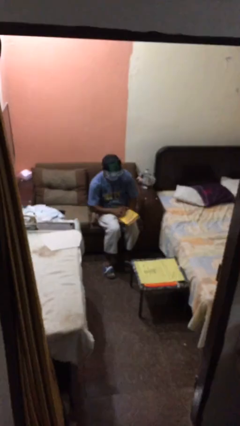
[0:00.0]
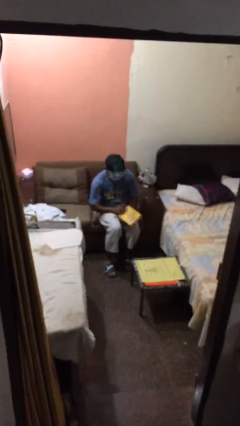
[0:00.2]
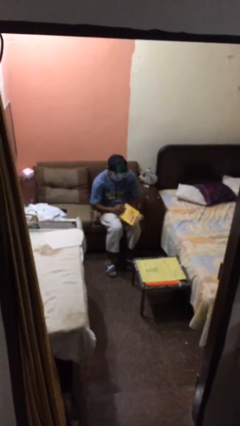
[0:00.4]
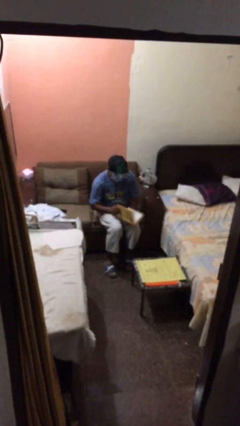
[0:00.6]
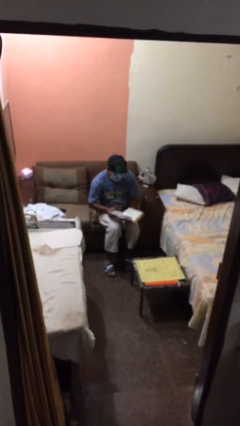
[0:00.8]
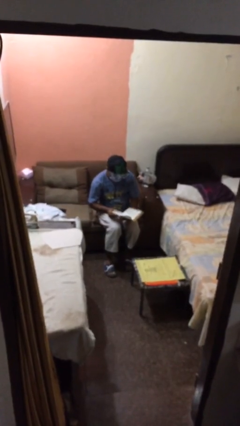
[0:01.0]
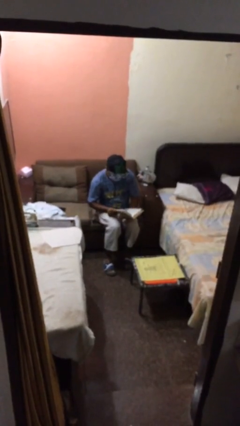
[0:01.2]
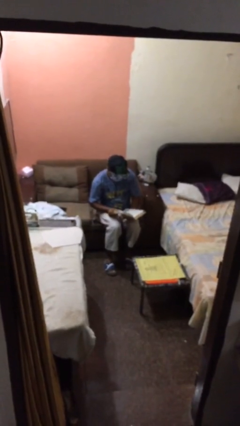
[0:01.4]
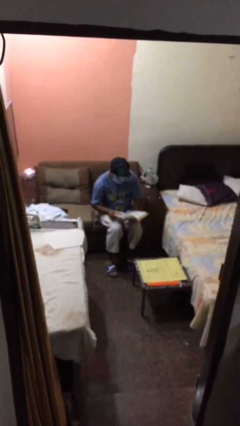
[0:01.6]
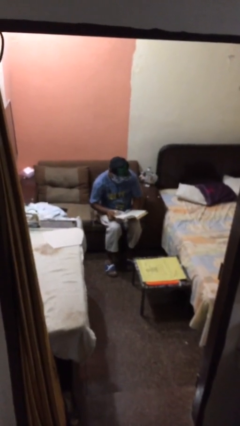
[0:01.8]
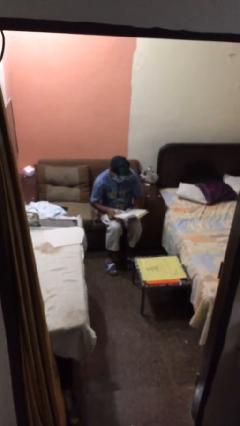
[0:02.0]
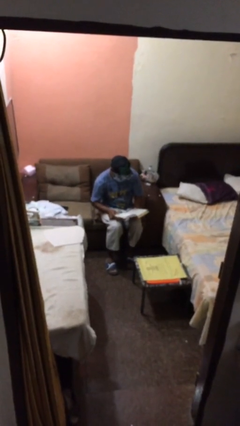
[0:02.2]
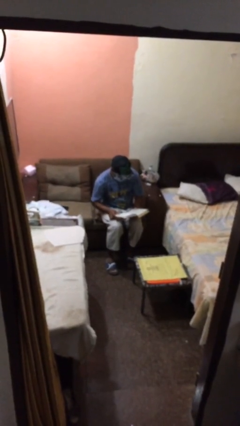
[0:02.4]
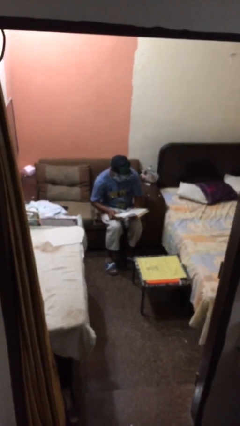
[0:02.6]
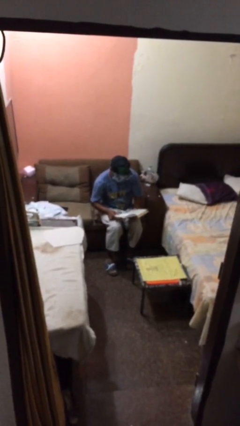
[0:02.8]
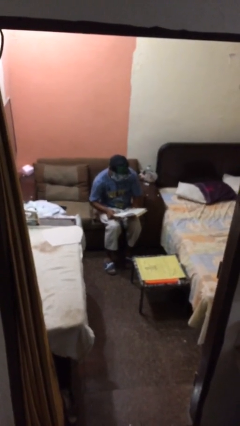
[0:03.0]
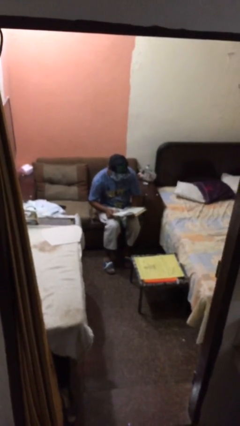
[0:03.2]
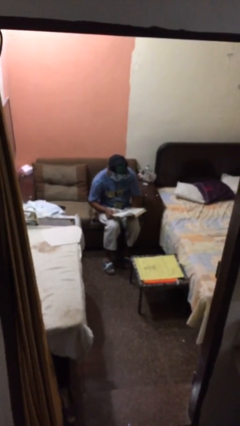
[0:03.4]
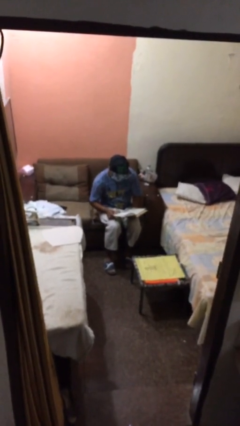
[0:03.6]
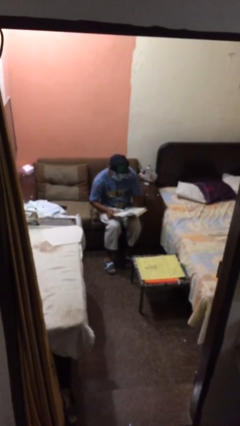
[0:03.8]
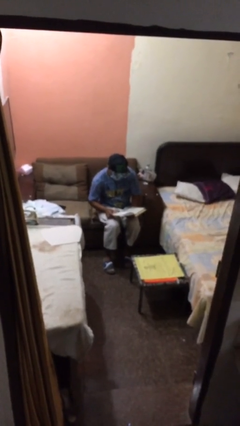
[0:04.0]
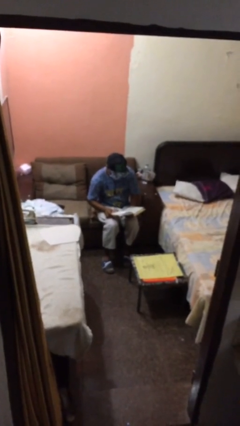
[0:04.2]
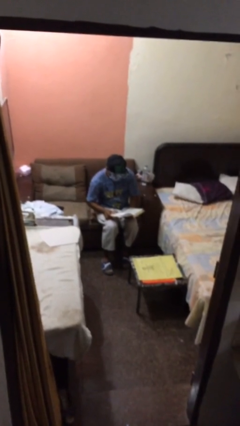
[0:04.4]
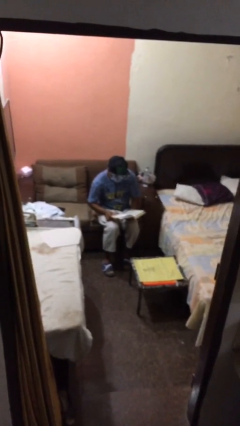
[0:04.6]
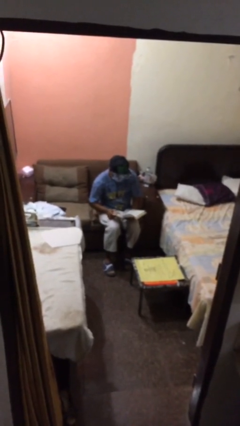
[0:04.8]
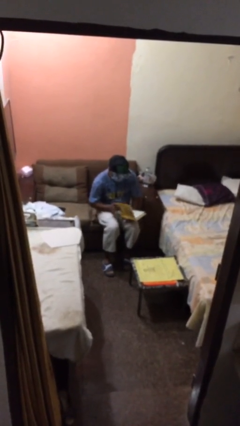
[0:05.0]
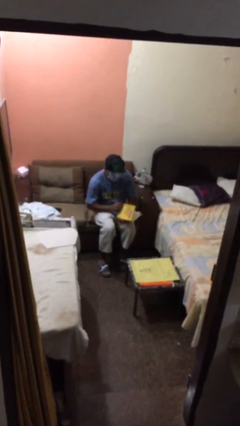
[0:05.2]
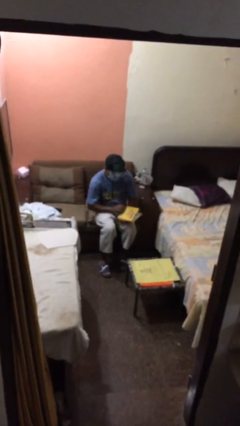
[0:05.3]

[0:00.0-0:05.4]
person reads document

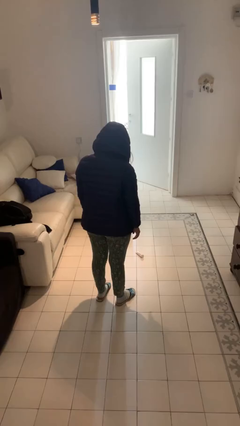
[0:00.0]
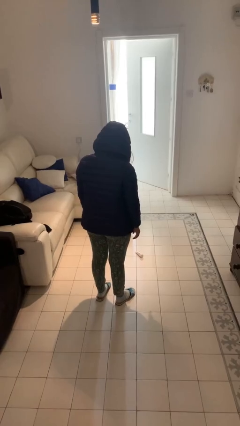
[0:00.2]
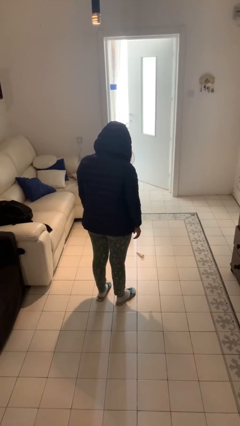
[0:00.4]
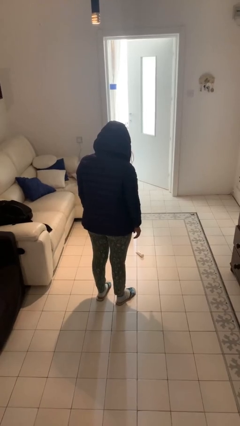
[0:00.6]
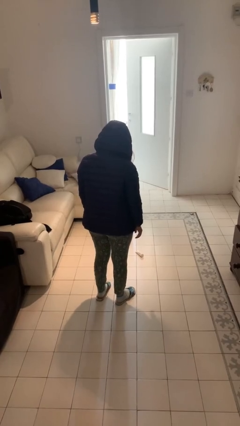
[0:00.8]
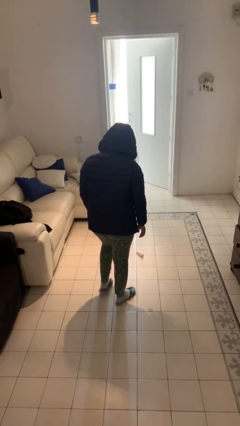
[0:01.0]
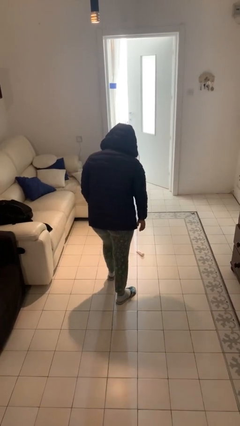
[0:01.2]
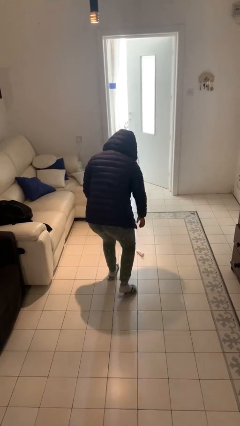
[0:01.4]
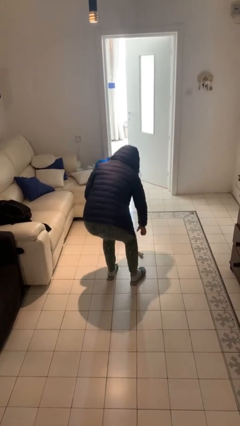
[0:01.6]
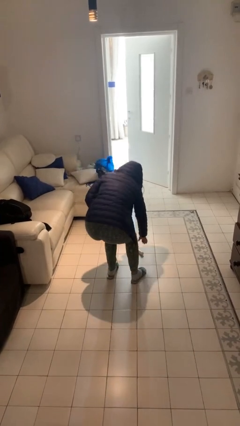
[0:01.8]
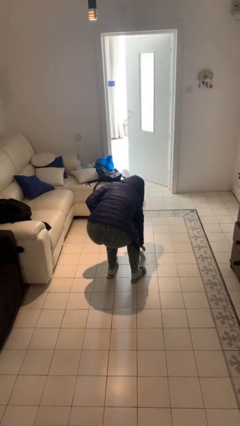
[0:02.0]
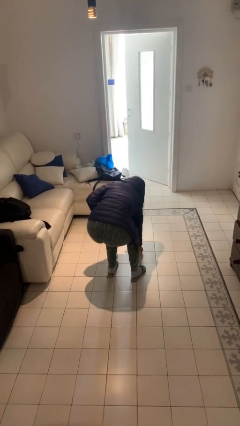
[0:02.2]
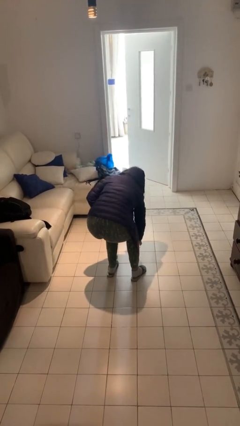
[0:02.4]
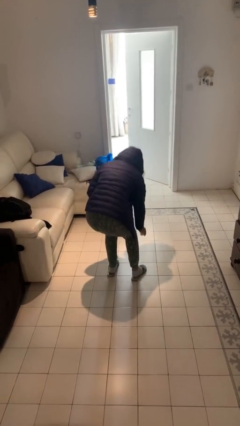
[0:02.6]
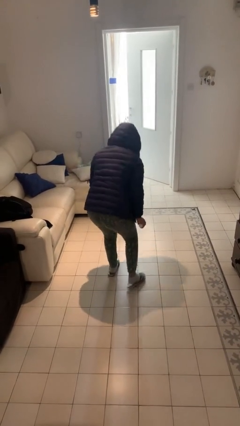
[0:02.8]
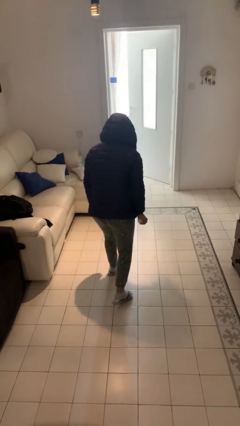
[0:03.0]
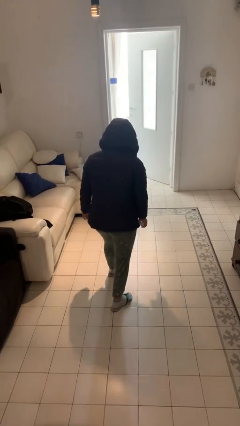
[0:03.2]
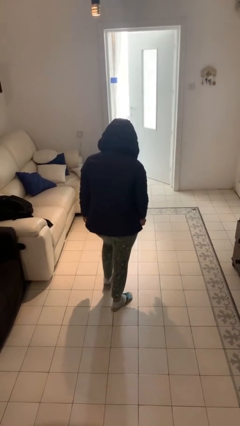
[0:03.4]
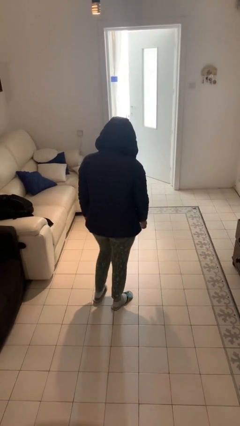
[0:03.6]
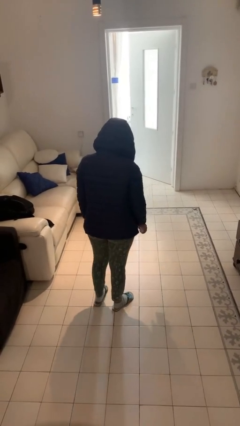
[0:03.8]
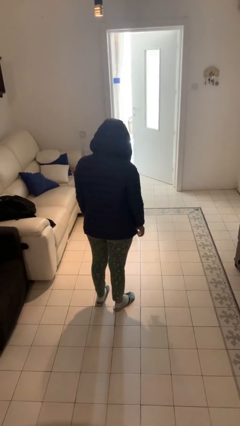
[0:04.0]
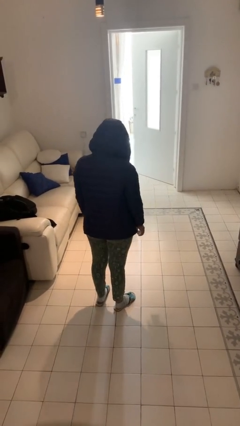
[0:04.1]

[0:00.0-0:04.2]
person picks up object from floor

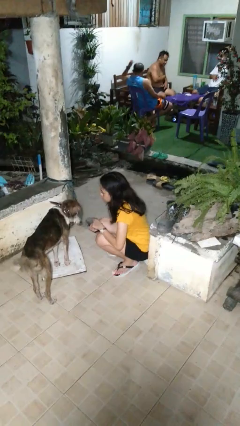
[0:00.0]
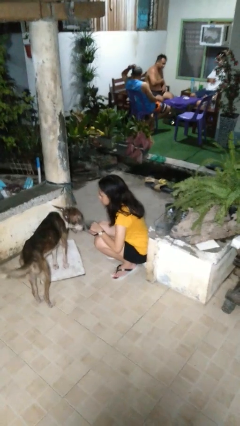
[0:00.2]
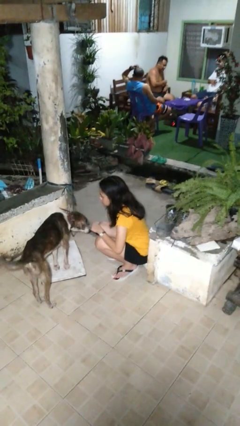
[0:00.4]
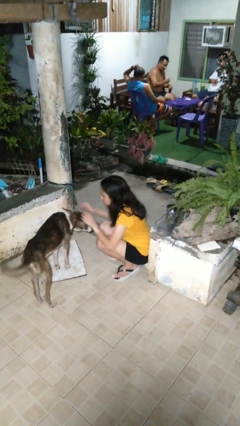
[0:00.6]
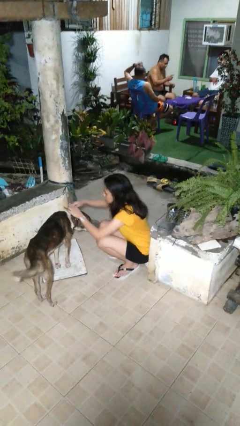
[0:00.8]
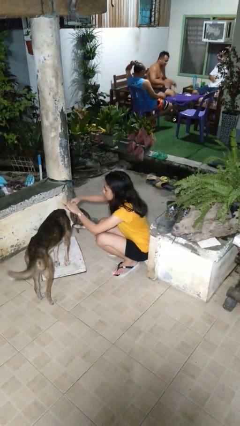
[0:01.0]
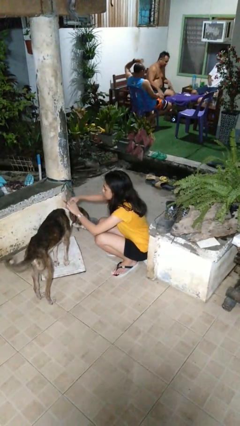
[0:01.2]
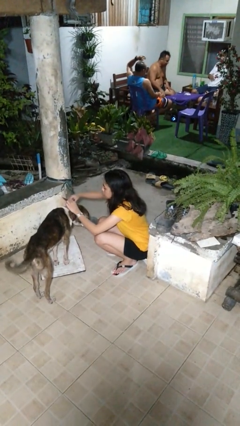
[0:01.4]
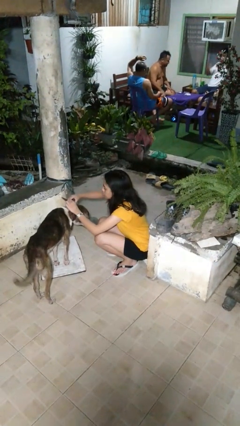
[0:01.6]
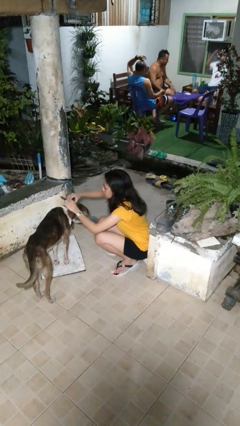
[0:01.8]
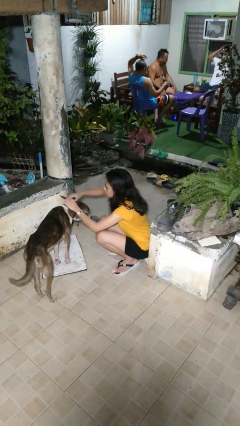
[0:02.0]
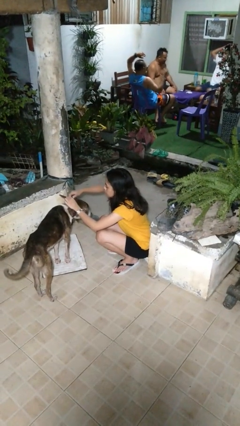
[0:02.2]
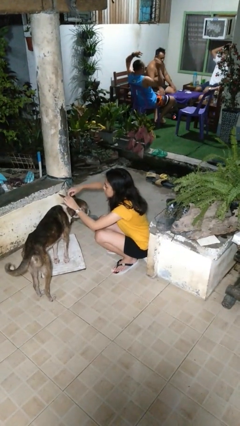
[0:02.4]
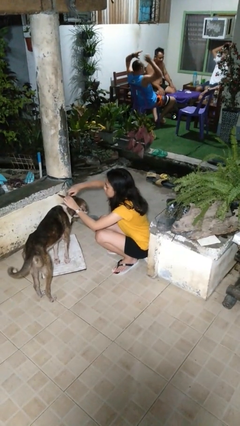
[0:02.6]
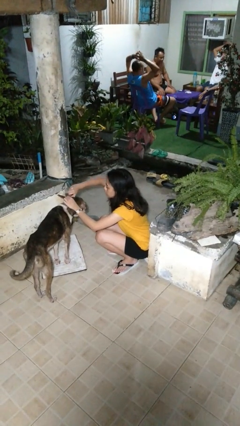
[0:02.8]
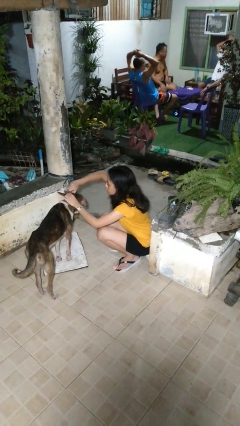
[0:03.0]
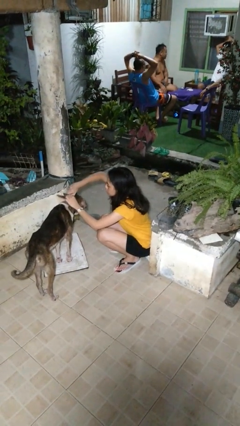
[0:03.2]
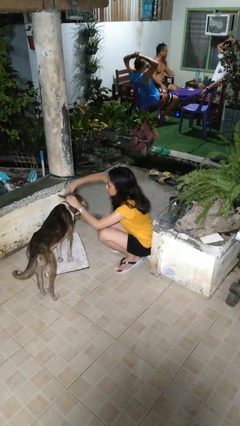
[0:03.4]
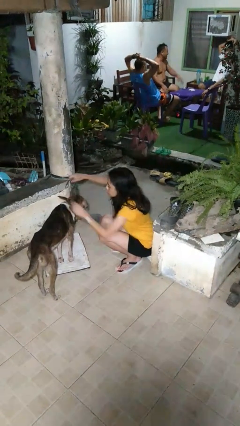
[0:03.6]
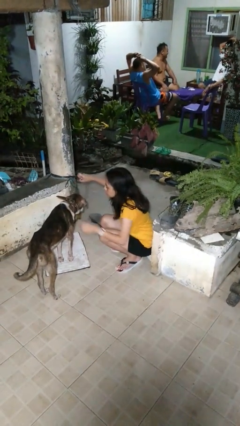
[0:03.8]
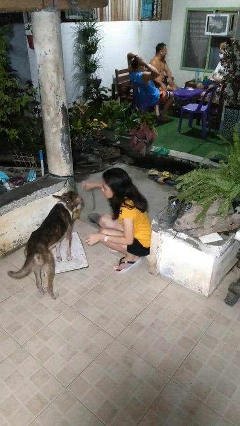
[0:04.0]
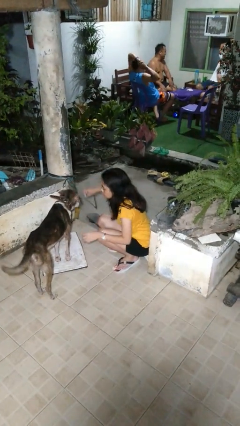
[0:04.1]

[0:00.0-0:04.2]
person unattaches leash from dog

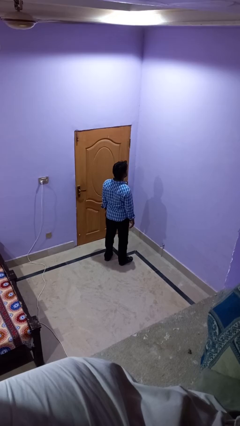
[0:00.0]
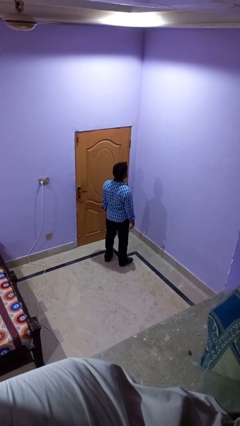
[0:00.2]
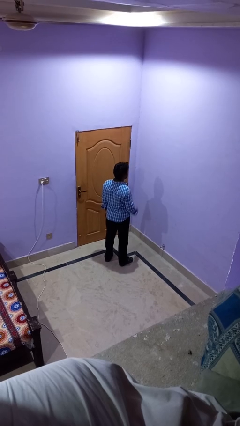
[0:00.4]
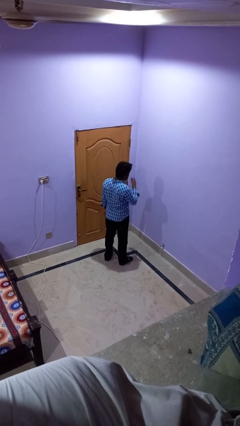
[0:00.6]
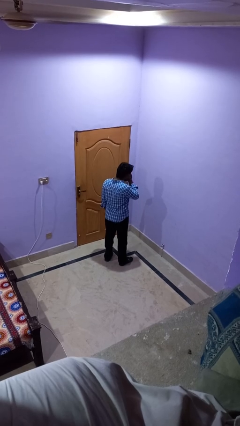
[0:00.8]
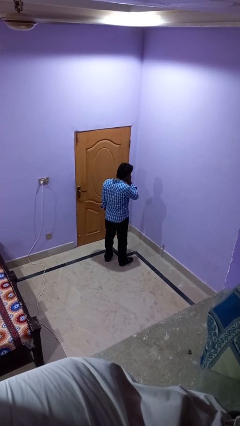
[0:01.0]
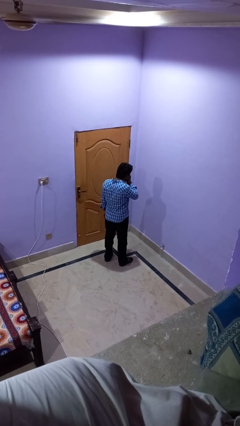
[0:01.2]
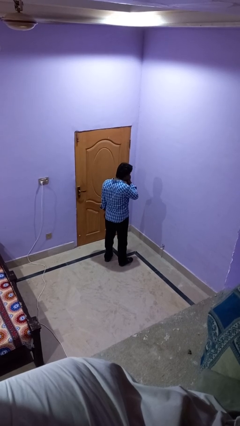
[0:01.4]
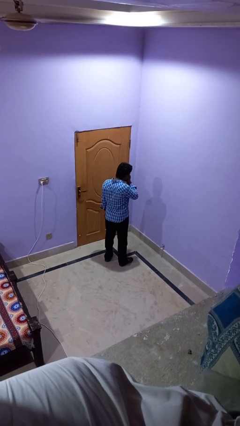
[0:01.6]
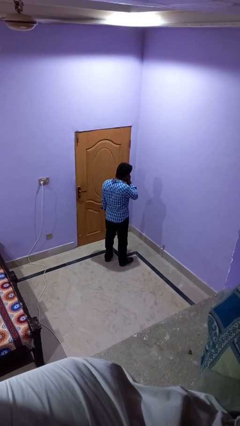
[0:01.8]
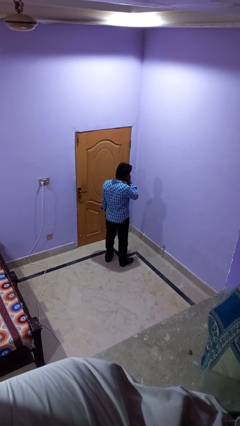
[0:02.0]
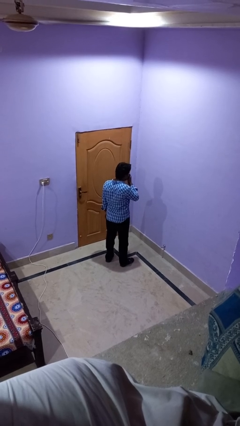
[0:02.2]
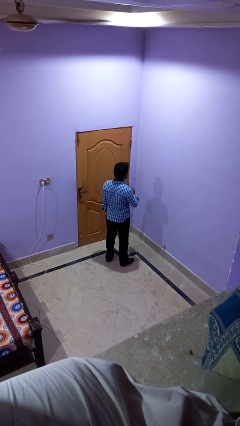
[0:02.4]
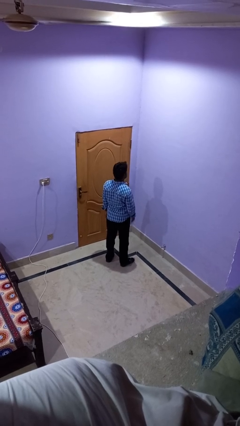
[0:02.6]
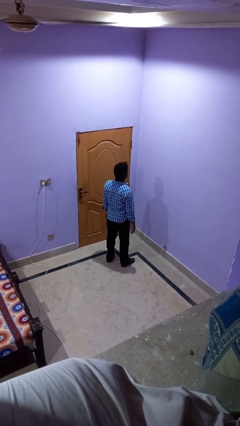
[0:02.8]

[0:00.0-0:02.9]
person sneezes into hand

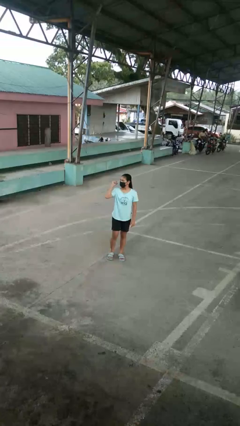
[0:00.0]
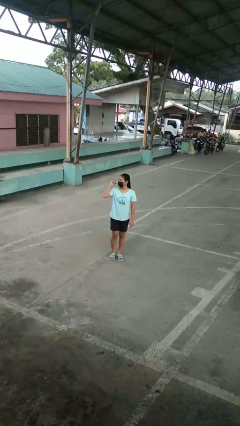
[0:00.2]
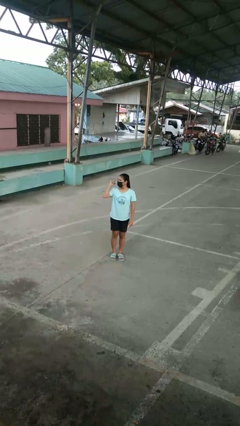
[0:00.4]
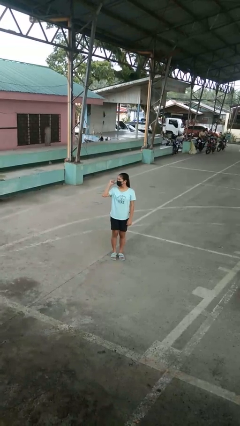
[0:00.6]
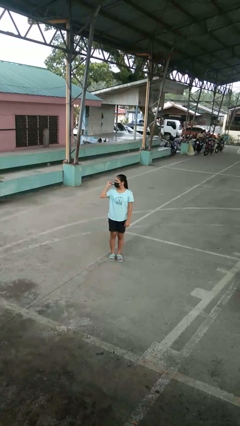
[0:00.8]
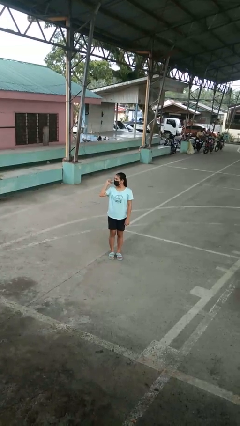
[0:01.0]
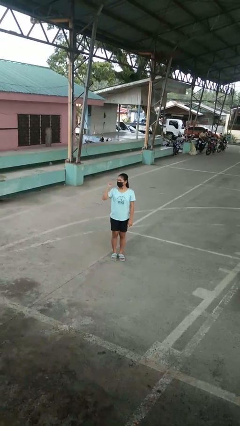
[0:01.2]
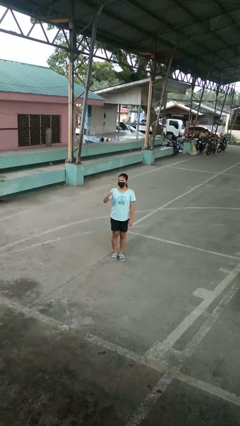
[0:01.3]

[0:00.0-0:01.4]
person gestures behind me
